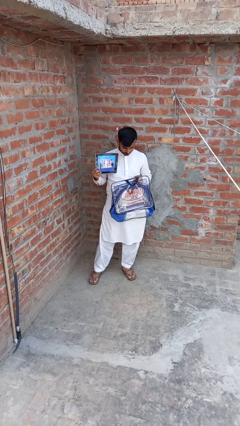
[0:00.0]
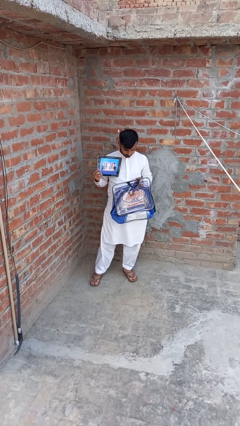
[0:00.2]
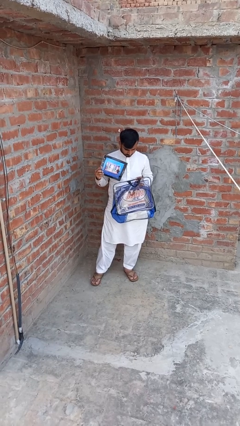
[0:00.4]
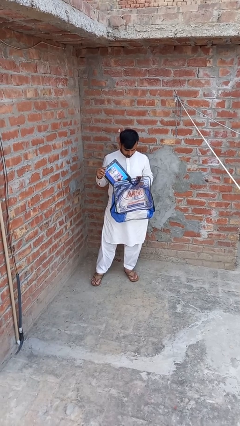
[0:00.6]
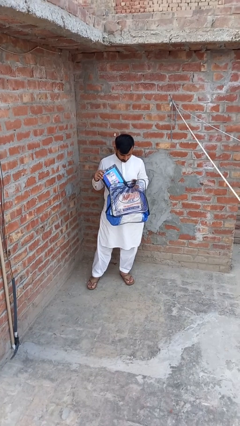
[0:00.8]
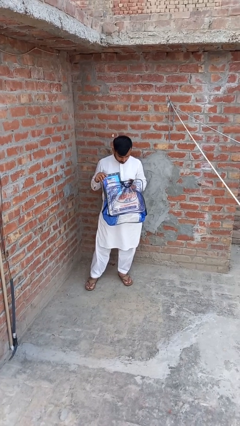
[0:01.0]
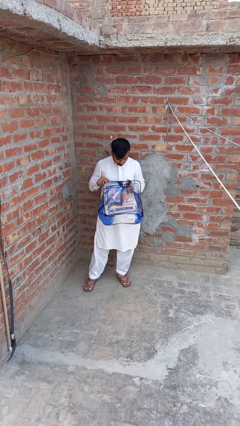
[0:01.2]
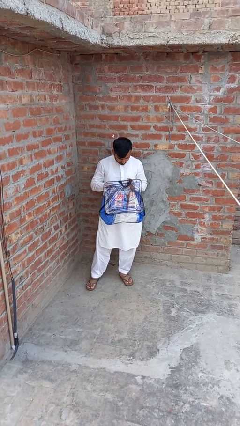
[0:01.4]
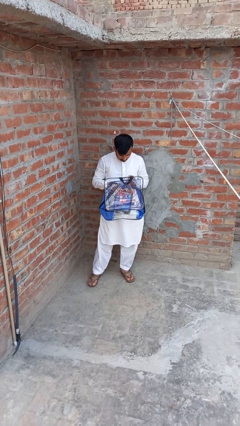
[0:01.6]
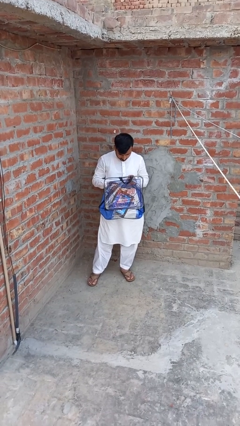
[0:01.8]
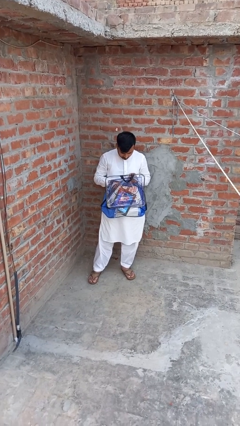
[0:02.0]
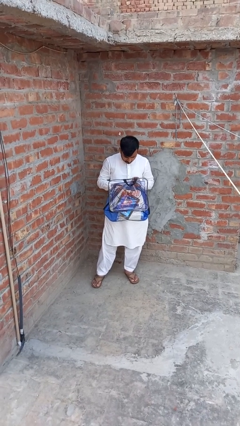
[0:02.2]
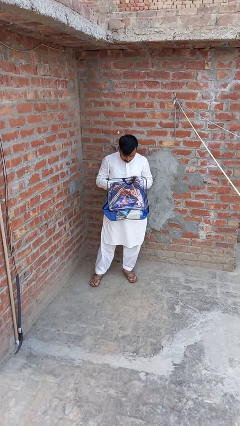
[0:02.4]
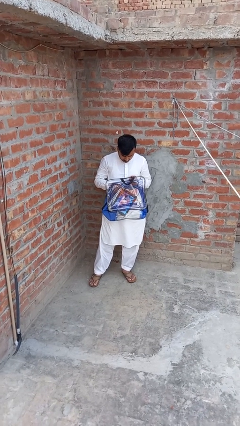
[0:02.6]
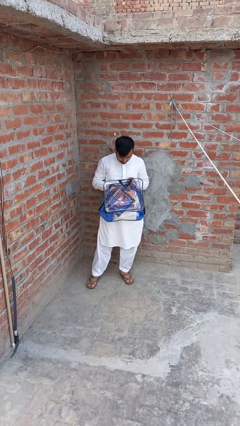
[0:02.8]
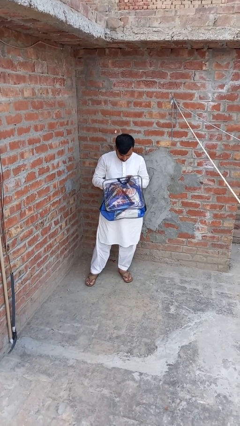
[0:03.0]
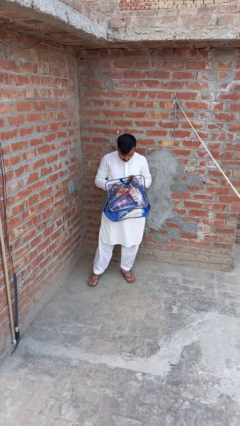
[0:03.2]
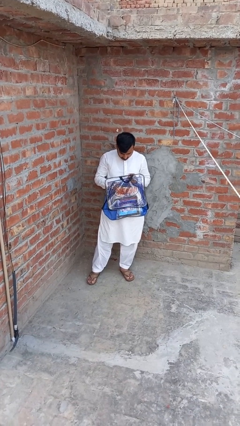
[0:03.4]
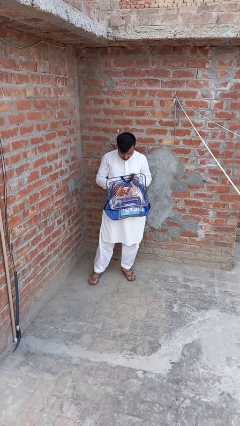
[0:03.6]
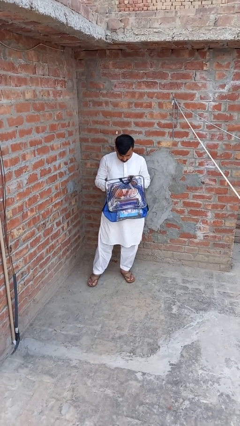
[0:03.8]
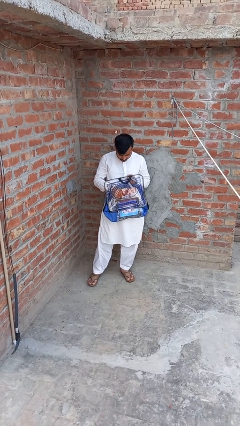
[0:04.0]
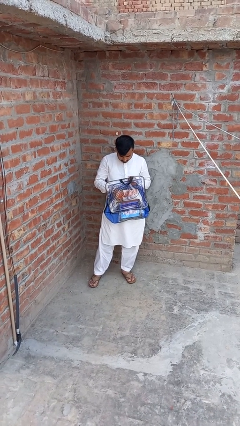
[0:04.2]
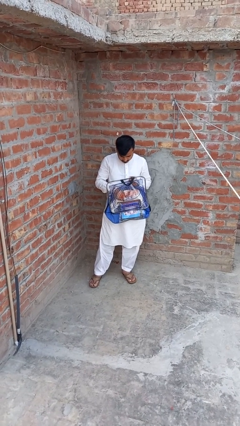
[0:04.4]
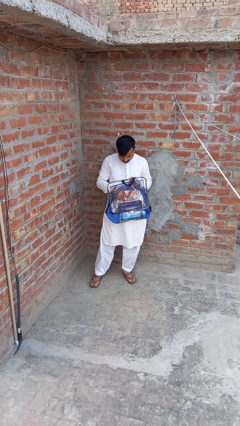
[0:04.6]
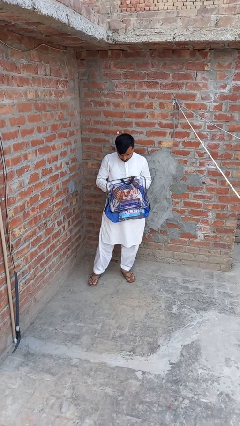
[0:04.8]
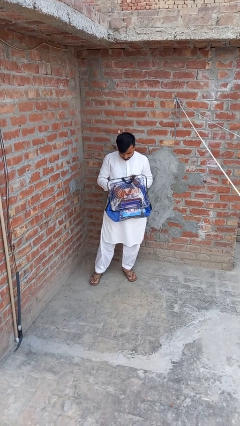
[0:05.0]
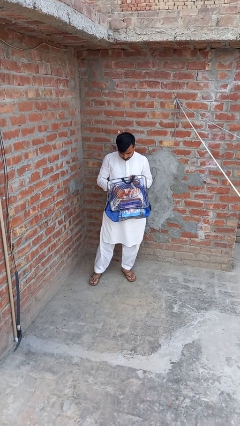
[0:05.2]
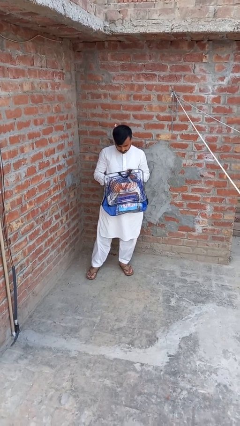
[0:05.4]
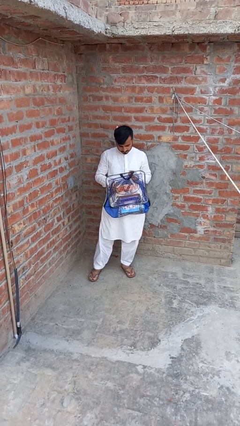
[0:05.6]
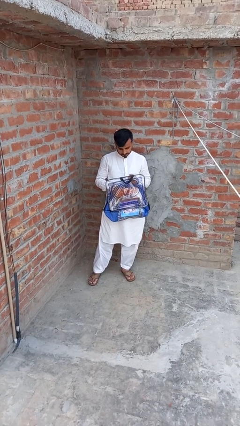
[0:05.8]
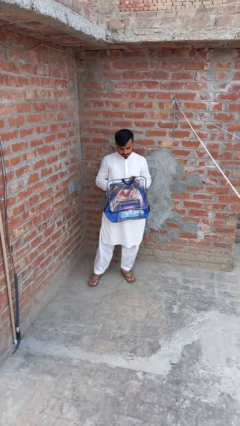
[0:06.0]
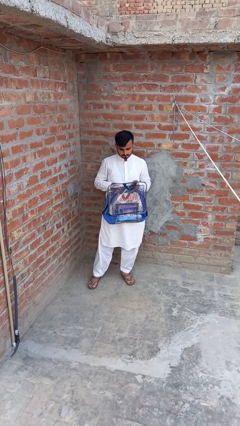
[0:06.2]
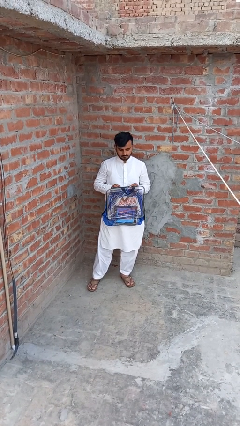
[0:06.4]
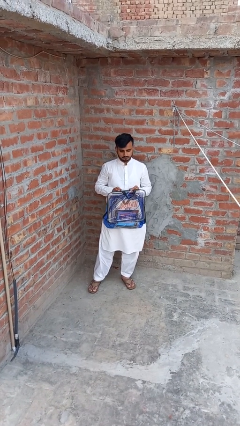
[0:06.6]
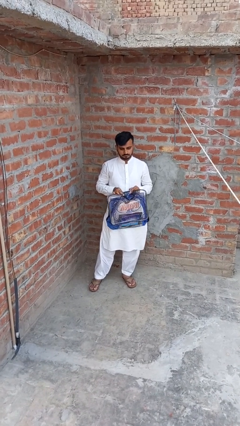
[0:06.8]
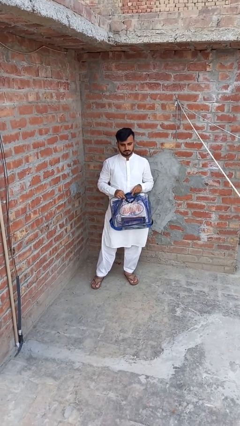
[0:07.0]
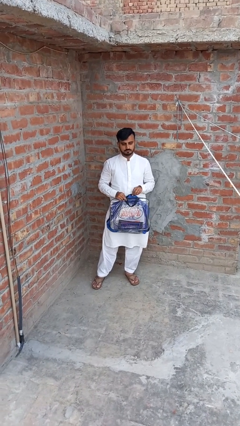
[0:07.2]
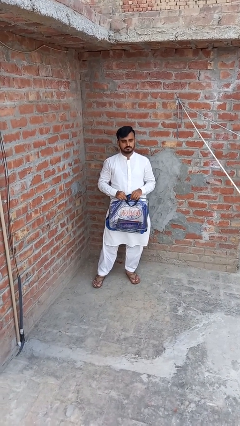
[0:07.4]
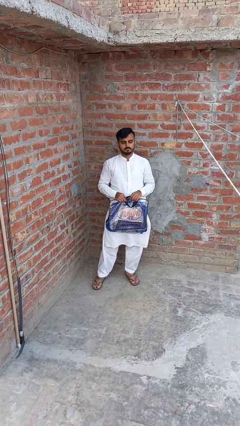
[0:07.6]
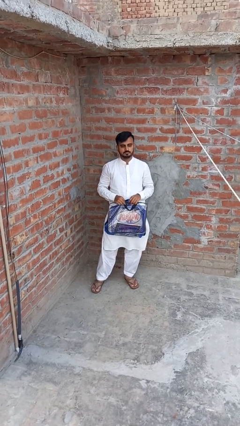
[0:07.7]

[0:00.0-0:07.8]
person puts object into backpack

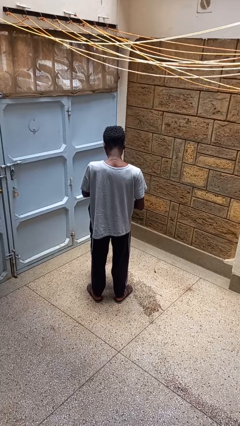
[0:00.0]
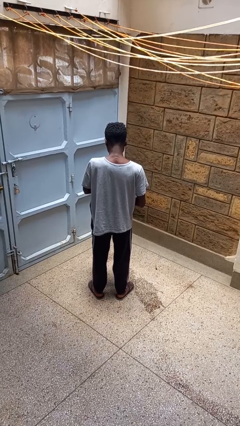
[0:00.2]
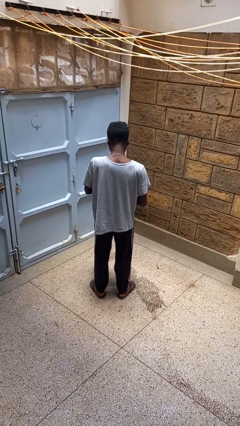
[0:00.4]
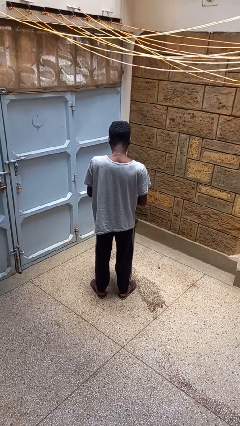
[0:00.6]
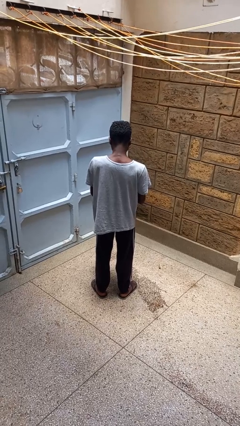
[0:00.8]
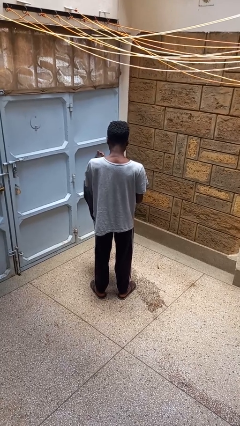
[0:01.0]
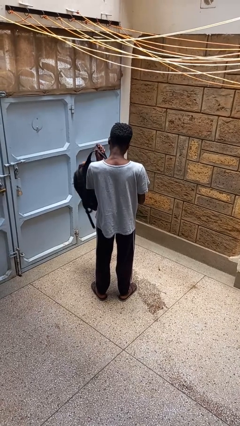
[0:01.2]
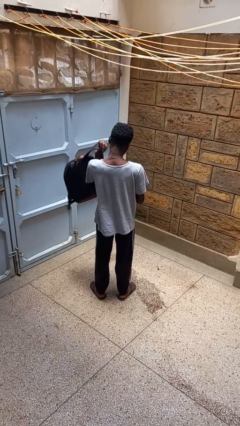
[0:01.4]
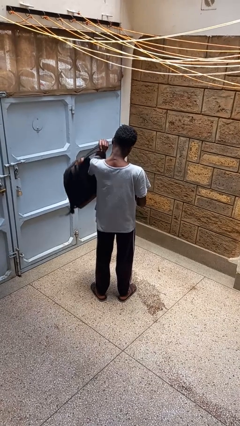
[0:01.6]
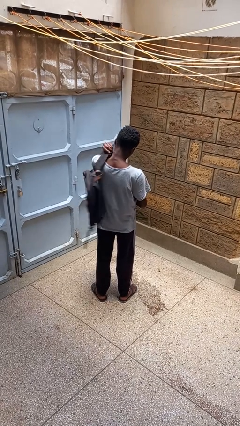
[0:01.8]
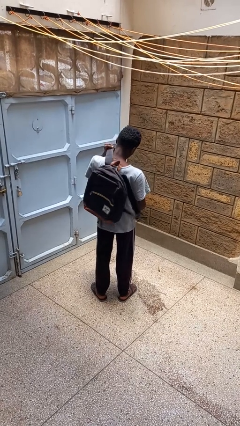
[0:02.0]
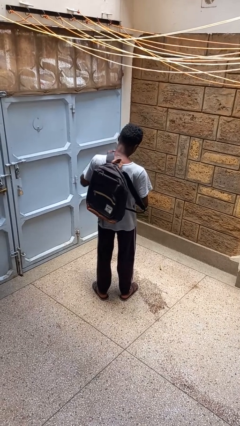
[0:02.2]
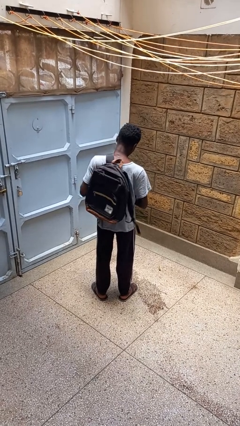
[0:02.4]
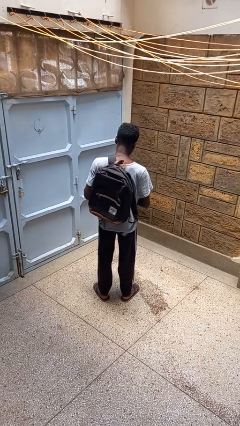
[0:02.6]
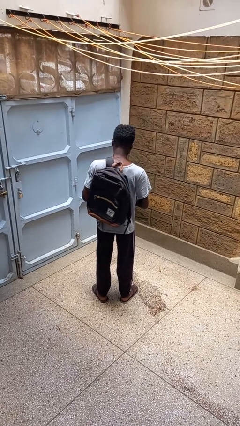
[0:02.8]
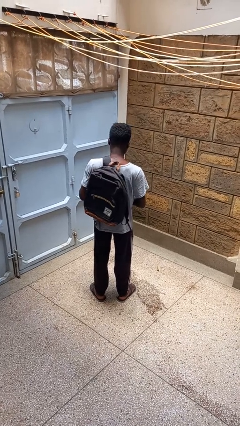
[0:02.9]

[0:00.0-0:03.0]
person puts on backpack

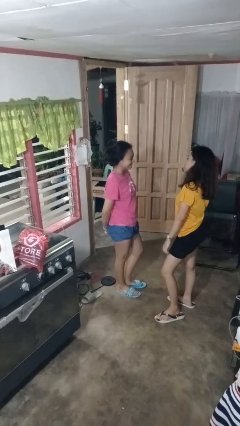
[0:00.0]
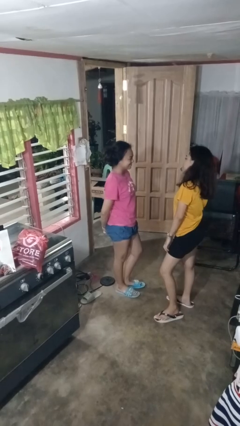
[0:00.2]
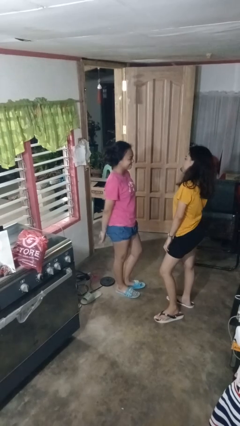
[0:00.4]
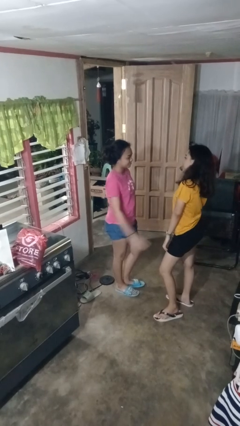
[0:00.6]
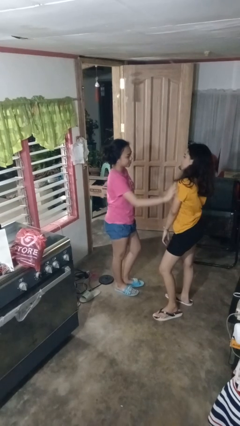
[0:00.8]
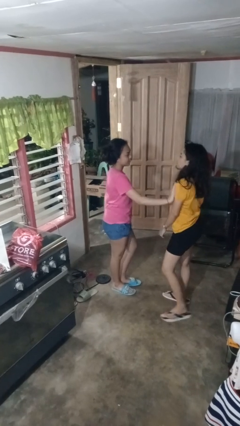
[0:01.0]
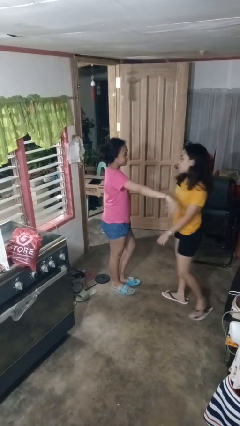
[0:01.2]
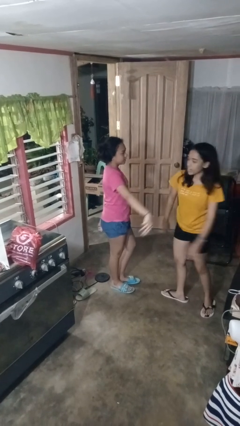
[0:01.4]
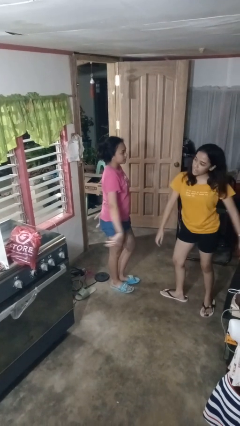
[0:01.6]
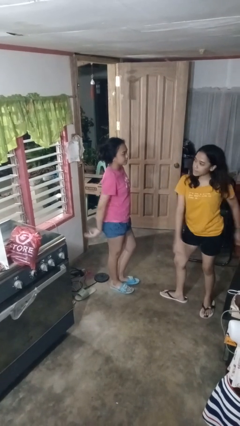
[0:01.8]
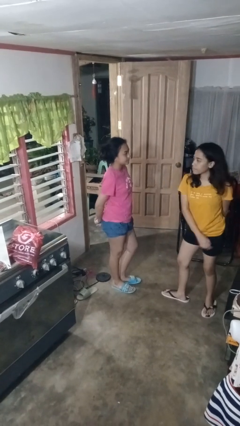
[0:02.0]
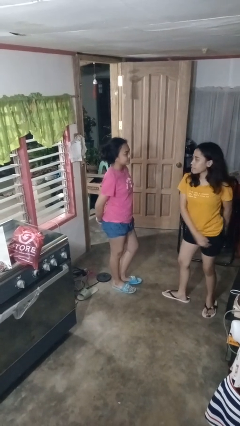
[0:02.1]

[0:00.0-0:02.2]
person shoves person

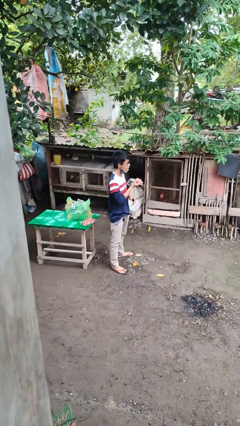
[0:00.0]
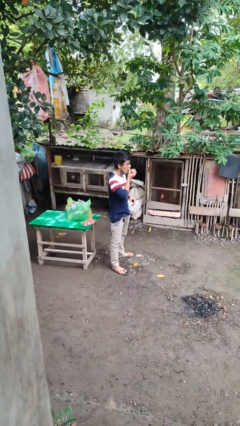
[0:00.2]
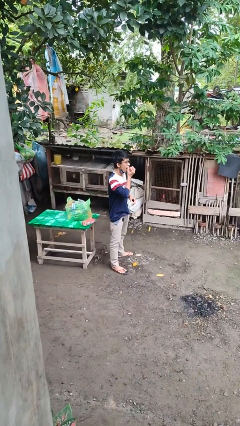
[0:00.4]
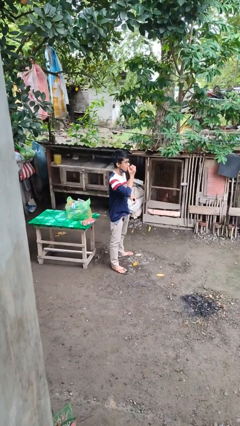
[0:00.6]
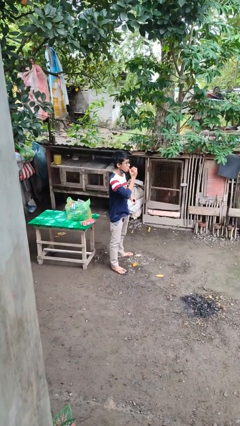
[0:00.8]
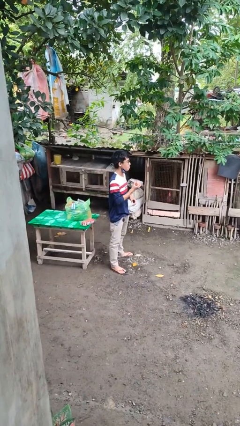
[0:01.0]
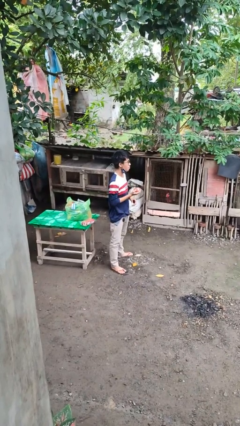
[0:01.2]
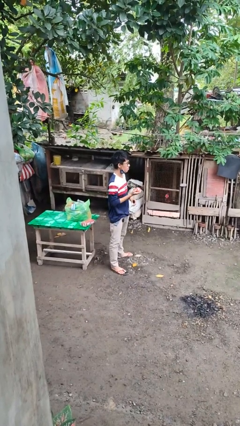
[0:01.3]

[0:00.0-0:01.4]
person eats apple

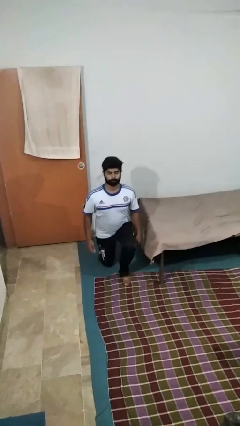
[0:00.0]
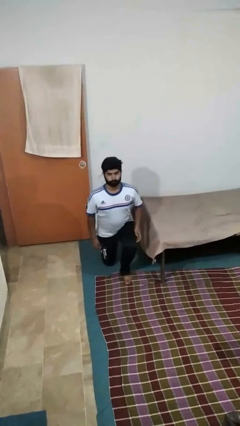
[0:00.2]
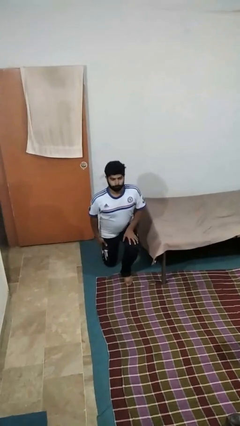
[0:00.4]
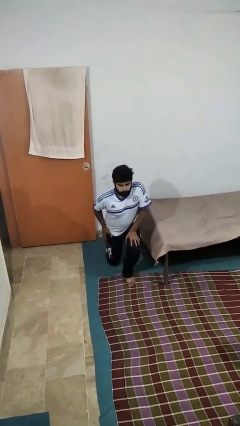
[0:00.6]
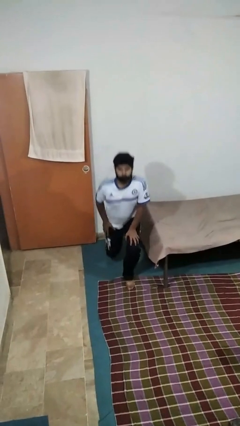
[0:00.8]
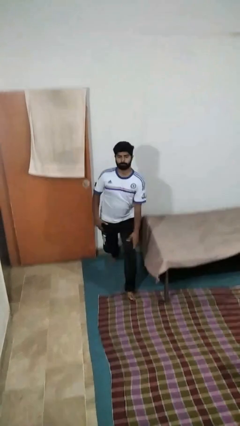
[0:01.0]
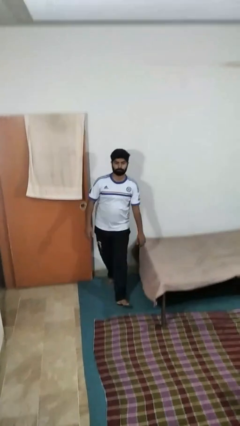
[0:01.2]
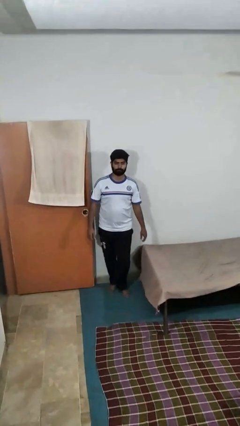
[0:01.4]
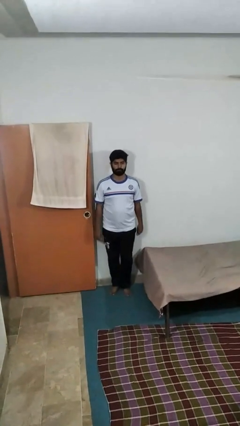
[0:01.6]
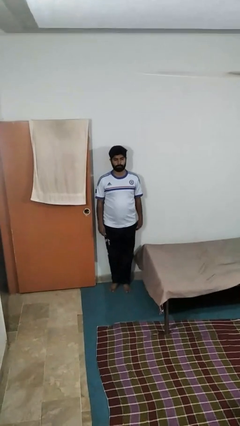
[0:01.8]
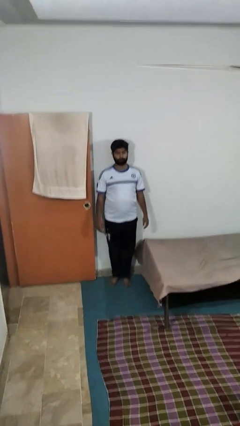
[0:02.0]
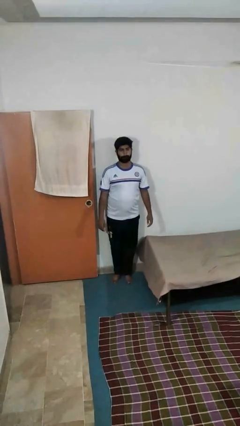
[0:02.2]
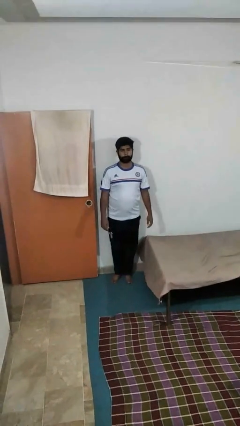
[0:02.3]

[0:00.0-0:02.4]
person stands up from floor

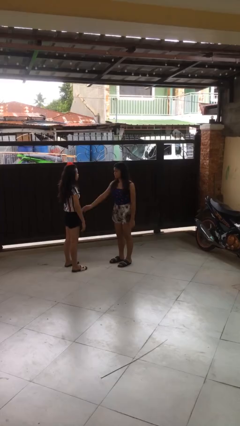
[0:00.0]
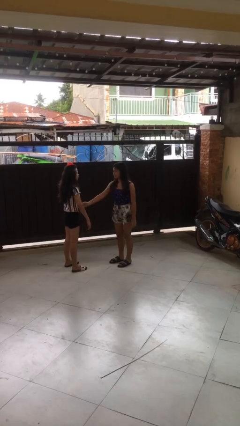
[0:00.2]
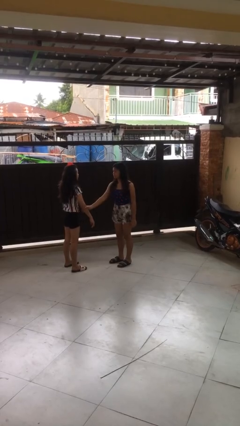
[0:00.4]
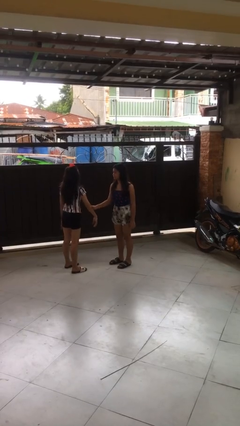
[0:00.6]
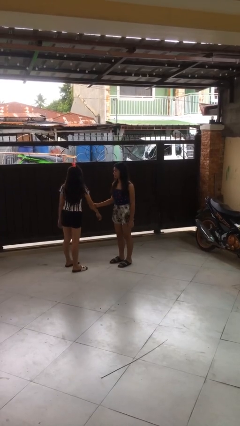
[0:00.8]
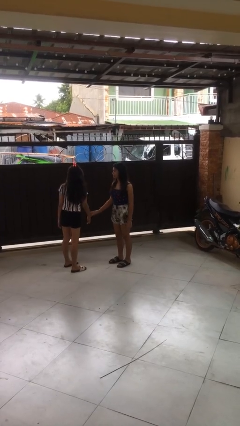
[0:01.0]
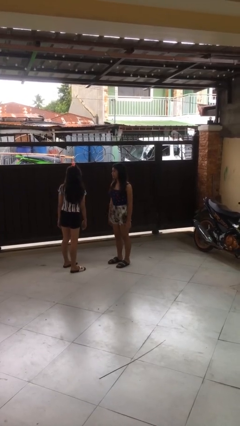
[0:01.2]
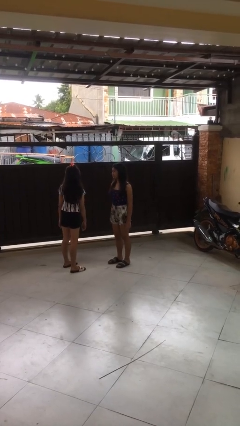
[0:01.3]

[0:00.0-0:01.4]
person grabs person by forearm
